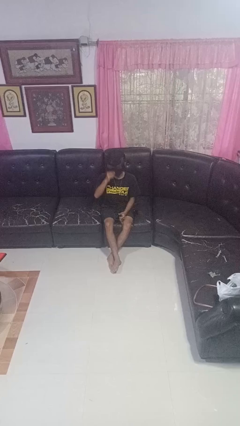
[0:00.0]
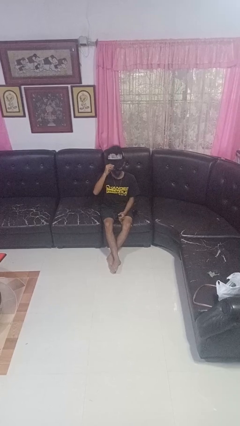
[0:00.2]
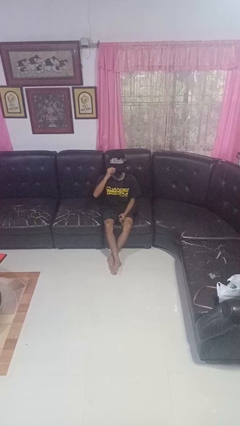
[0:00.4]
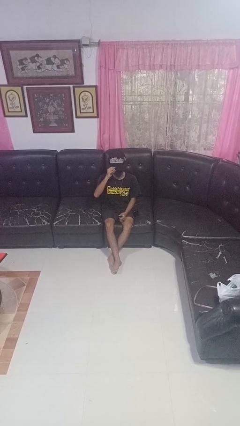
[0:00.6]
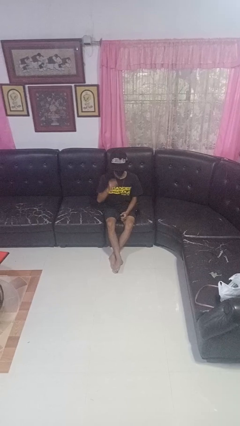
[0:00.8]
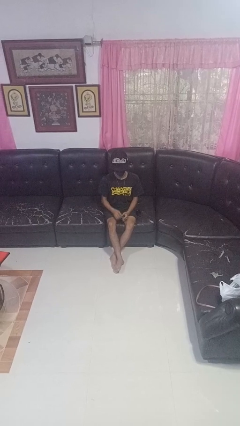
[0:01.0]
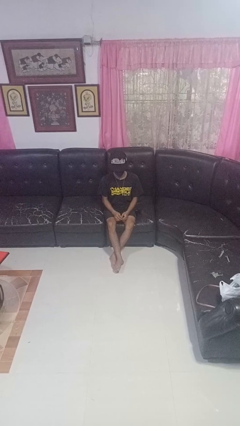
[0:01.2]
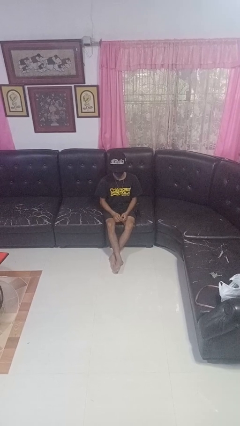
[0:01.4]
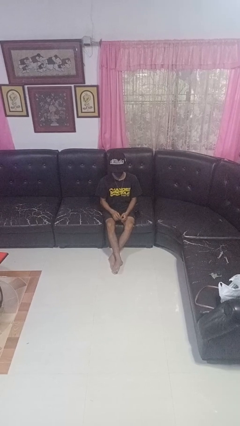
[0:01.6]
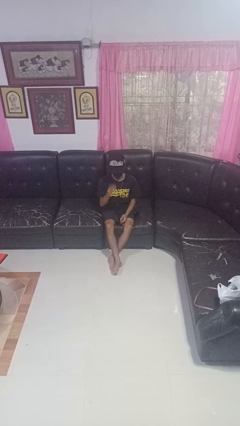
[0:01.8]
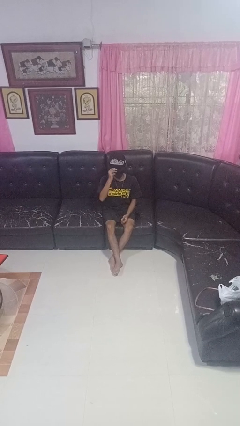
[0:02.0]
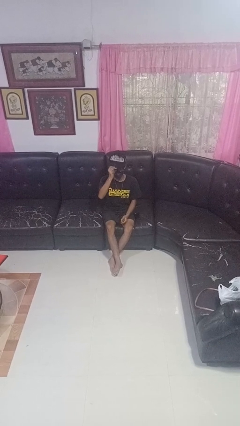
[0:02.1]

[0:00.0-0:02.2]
person puts on hat

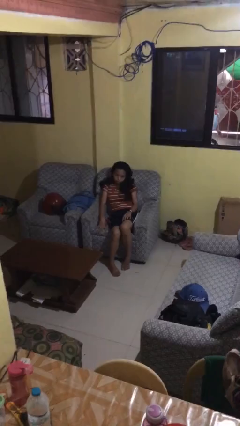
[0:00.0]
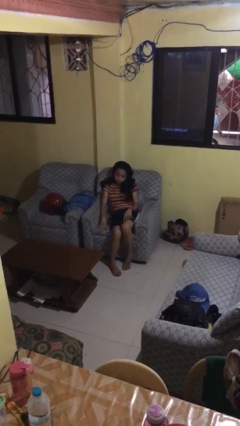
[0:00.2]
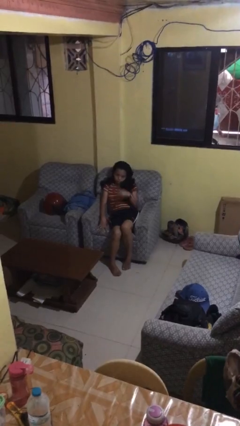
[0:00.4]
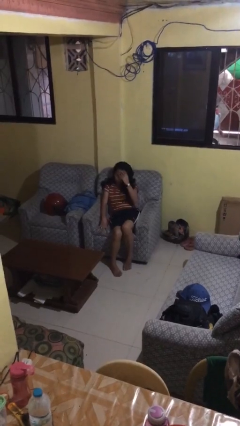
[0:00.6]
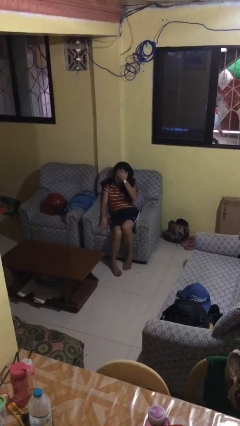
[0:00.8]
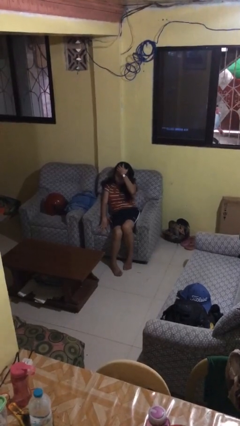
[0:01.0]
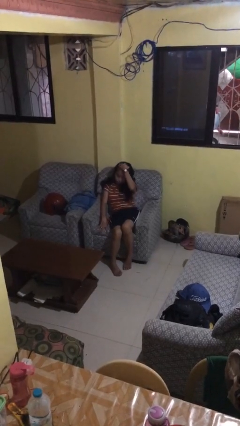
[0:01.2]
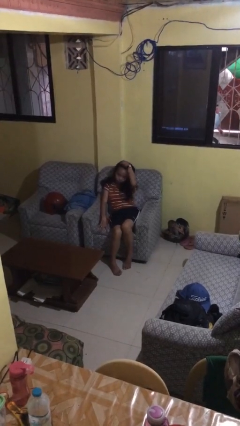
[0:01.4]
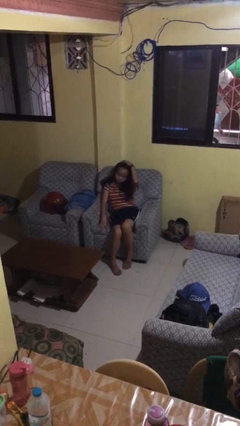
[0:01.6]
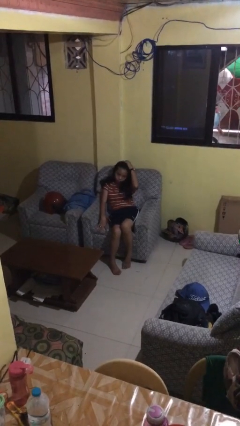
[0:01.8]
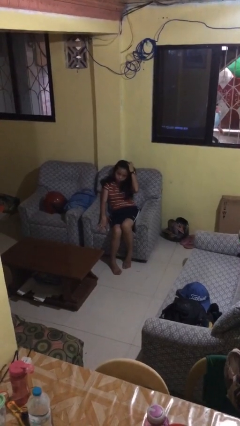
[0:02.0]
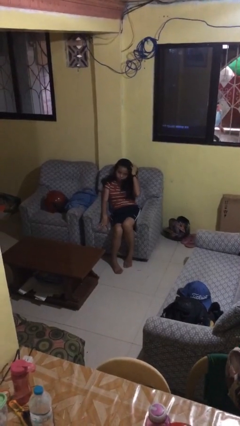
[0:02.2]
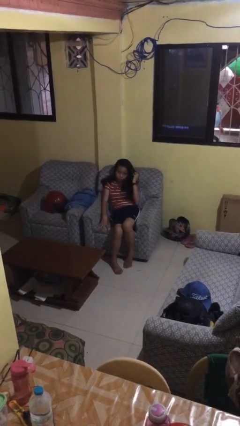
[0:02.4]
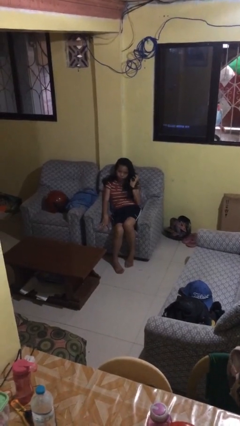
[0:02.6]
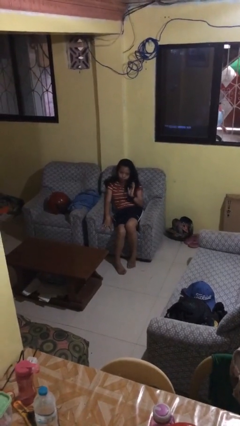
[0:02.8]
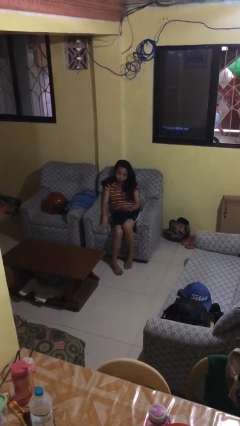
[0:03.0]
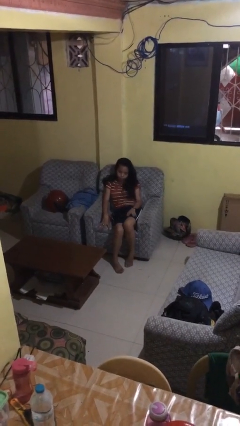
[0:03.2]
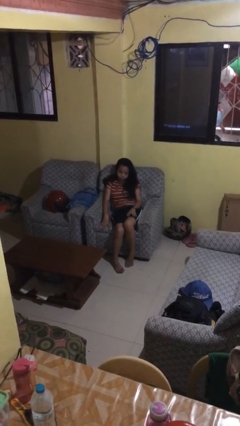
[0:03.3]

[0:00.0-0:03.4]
person strokes hair

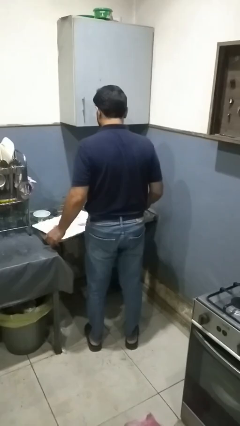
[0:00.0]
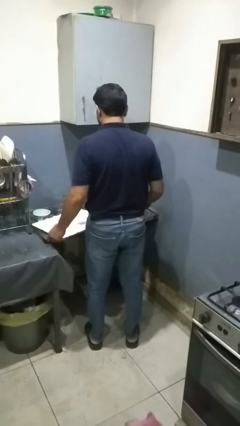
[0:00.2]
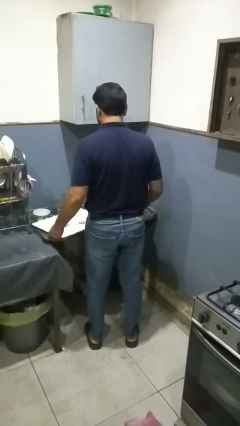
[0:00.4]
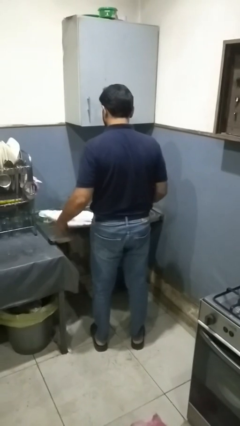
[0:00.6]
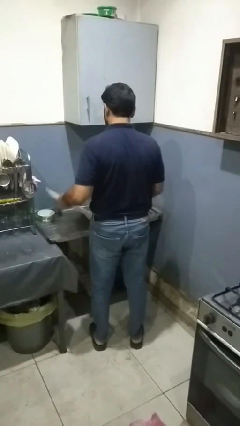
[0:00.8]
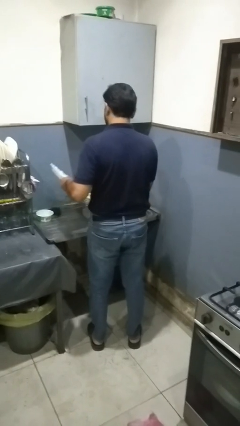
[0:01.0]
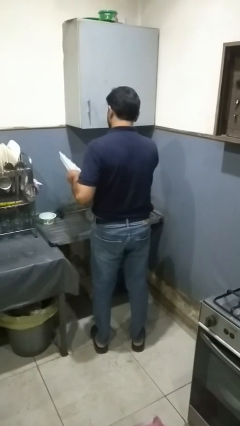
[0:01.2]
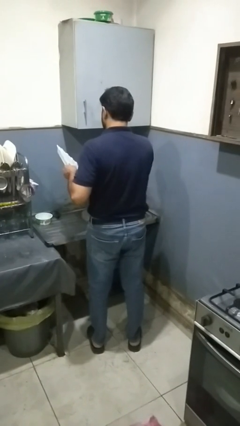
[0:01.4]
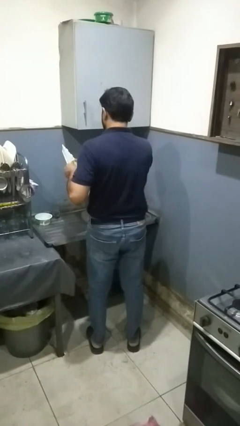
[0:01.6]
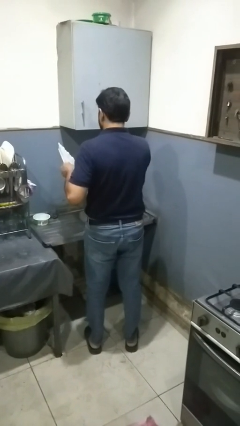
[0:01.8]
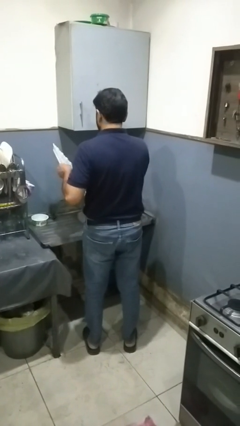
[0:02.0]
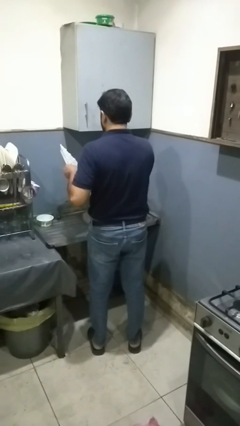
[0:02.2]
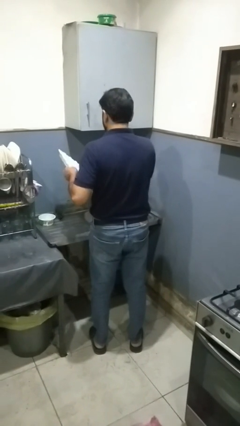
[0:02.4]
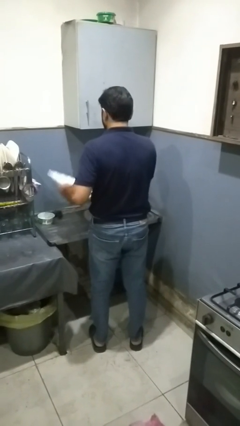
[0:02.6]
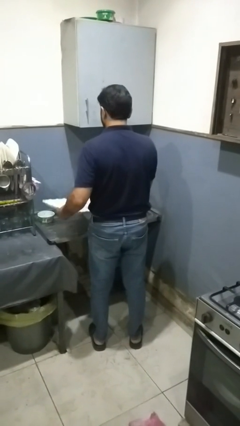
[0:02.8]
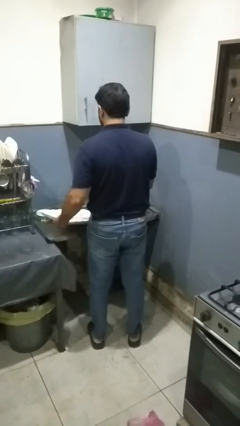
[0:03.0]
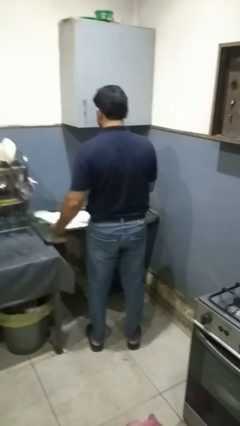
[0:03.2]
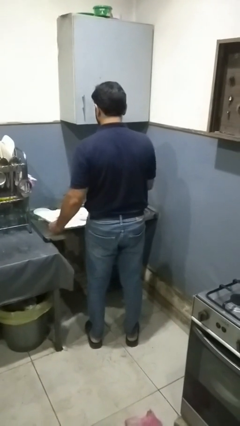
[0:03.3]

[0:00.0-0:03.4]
person washes dish

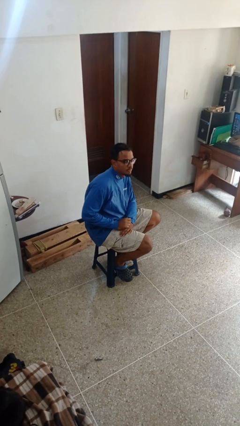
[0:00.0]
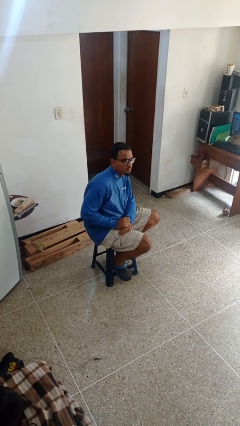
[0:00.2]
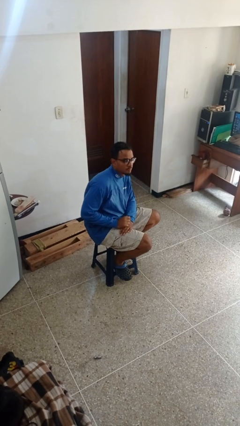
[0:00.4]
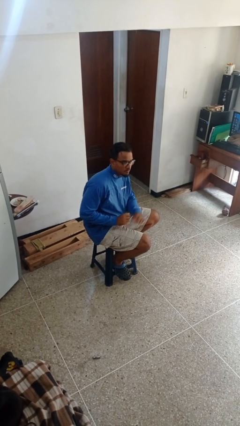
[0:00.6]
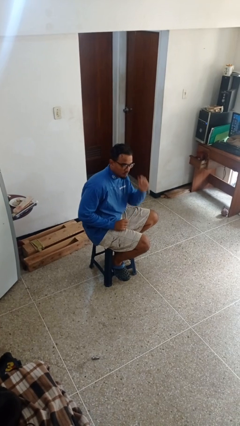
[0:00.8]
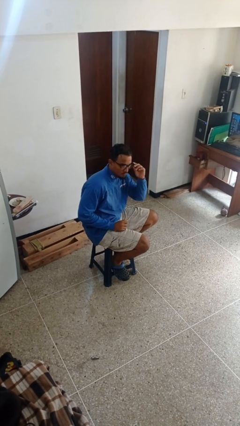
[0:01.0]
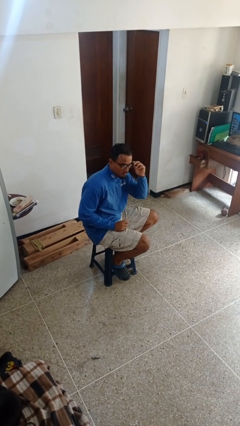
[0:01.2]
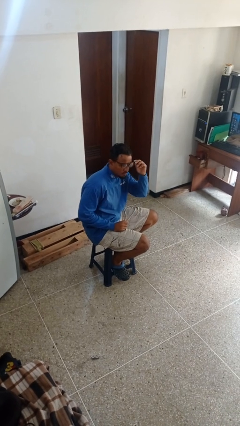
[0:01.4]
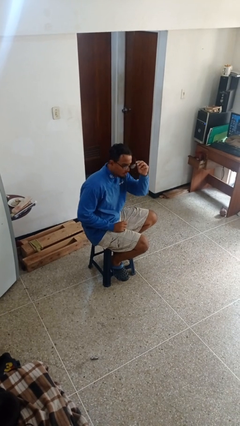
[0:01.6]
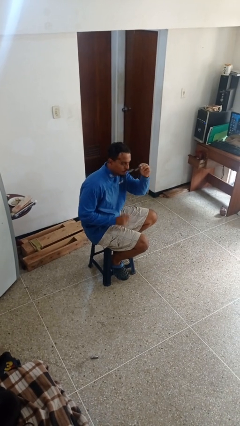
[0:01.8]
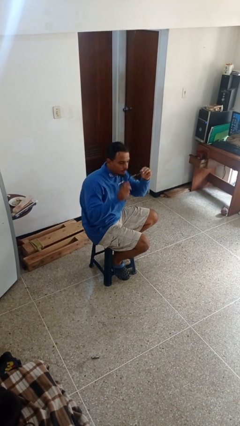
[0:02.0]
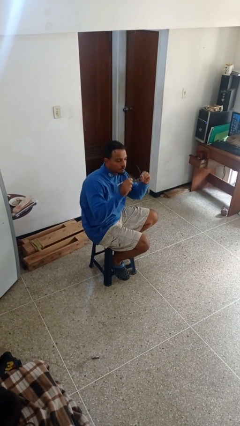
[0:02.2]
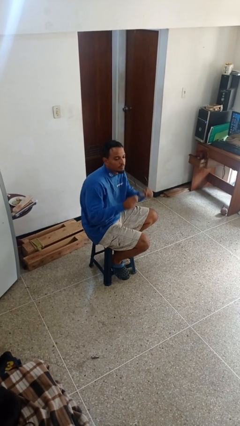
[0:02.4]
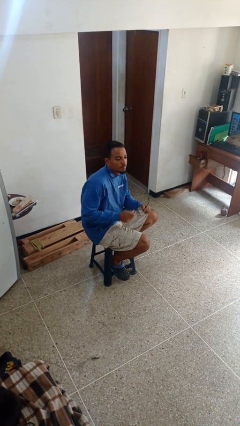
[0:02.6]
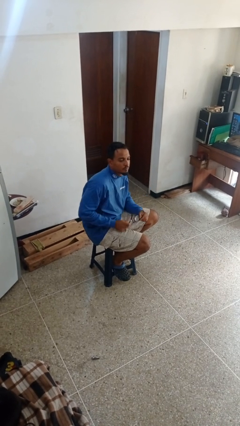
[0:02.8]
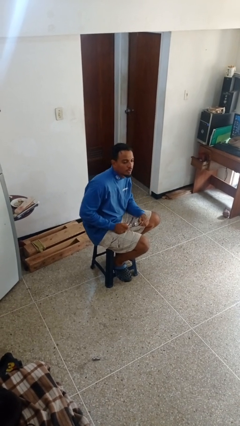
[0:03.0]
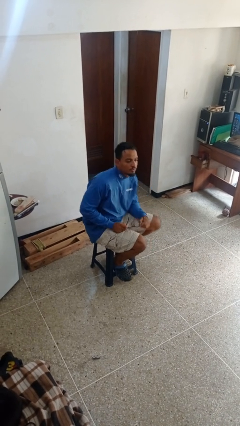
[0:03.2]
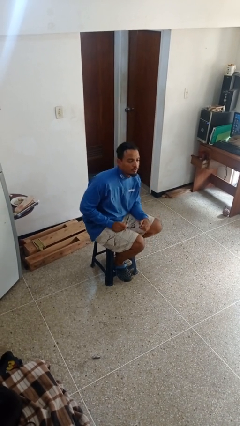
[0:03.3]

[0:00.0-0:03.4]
person takes off glasses

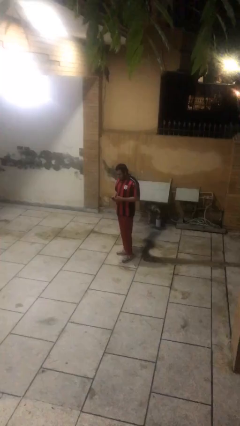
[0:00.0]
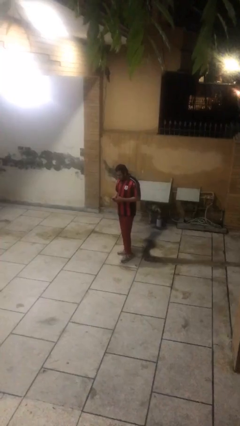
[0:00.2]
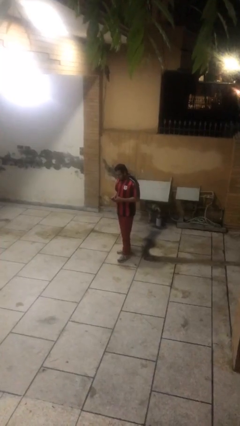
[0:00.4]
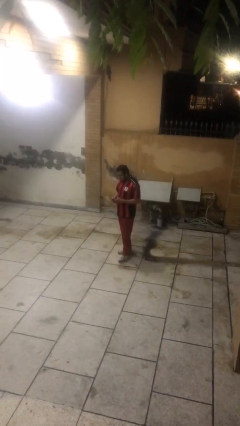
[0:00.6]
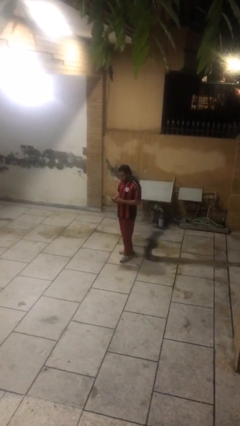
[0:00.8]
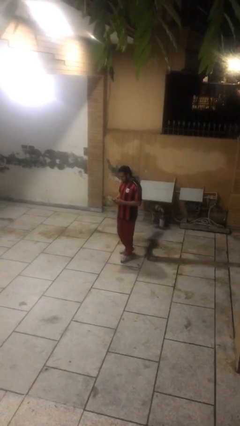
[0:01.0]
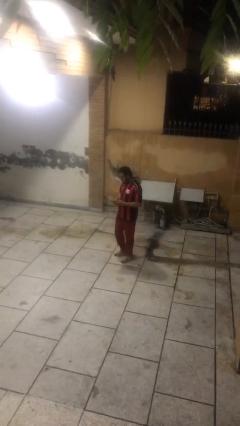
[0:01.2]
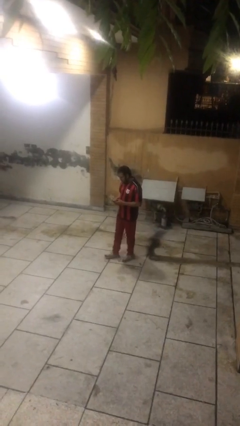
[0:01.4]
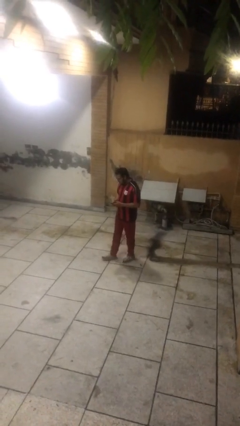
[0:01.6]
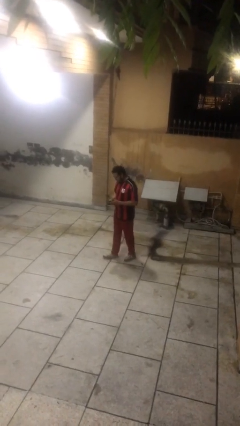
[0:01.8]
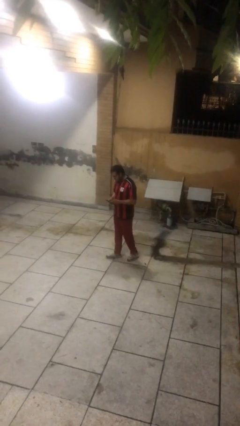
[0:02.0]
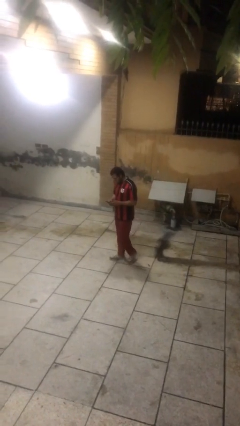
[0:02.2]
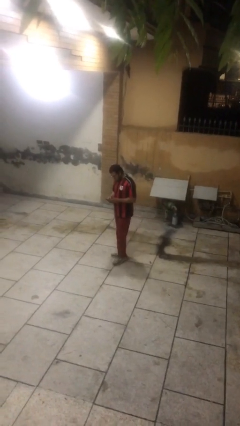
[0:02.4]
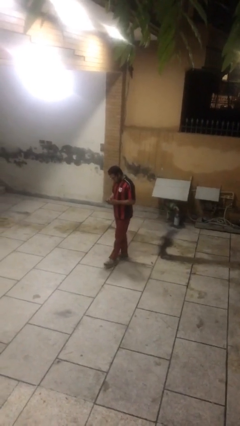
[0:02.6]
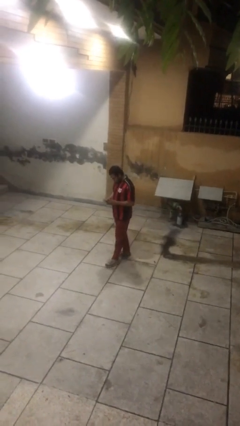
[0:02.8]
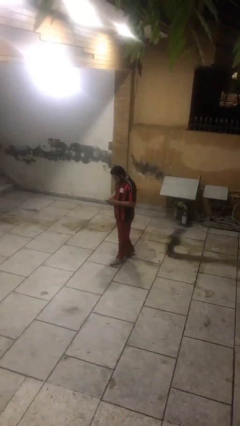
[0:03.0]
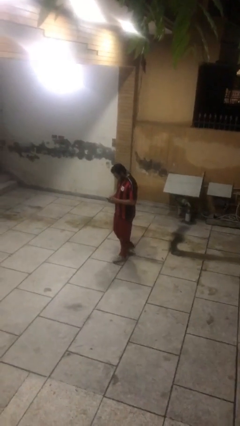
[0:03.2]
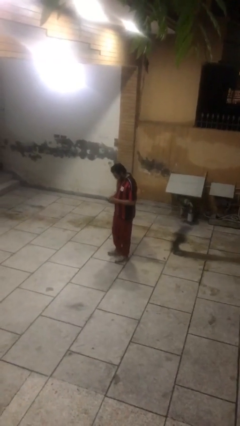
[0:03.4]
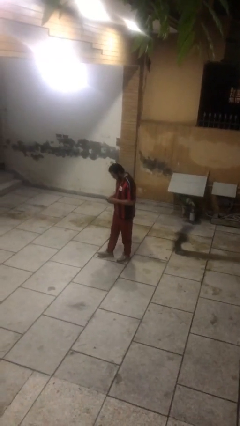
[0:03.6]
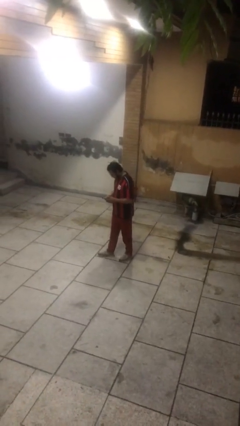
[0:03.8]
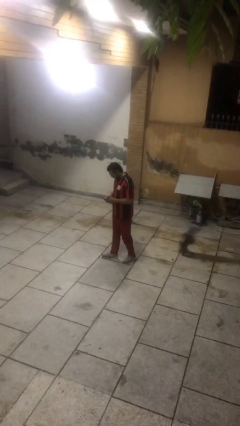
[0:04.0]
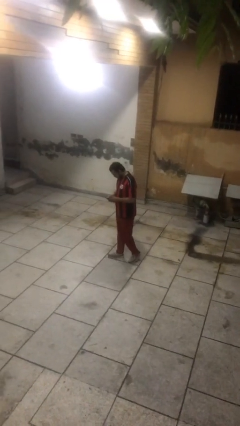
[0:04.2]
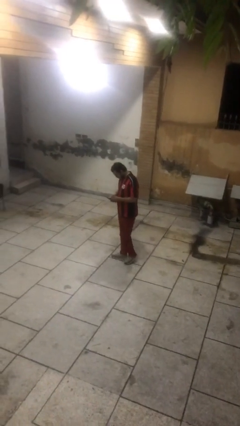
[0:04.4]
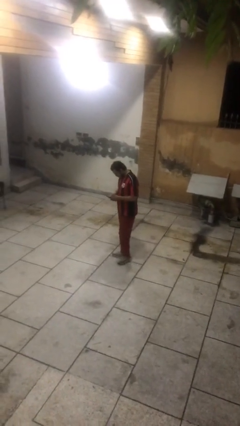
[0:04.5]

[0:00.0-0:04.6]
person texts on phone

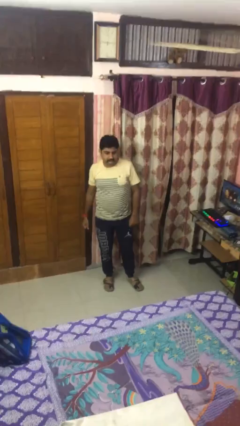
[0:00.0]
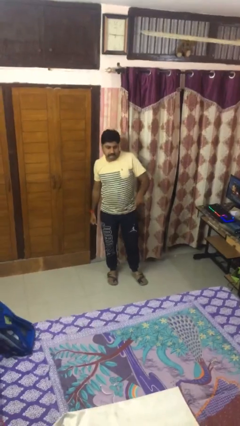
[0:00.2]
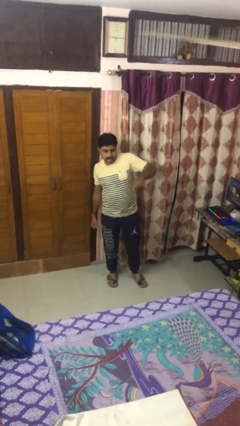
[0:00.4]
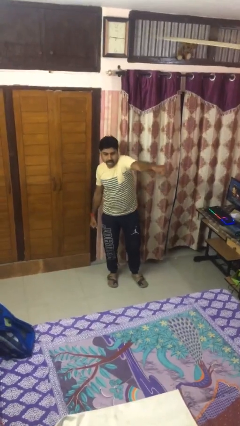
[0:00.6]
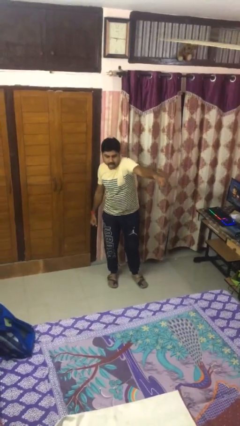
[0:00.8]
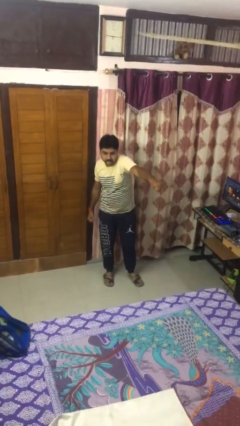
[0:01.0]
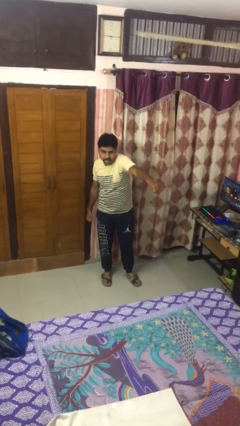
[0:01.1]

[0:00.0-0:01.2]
person punches
